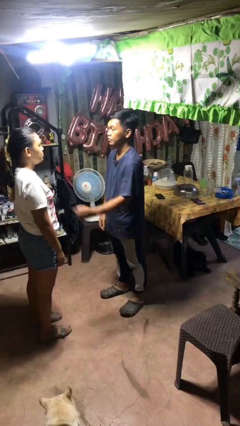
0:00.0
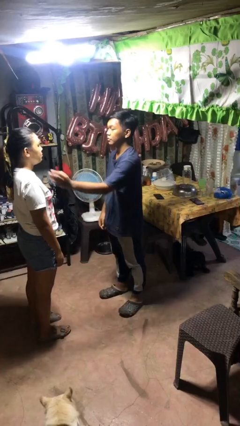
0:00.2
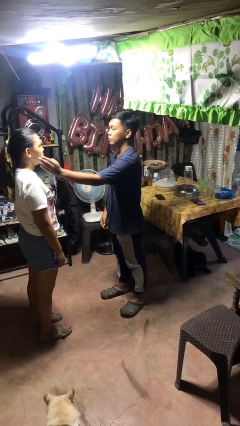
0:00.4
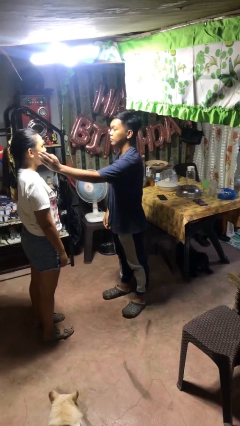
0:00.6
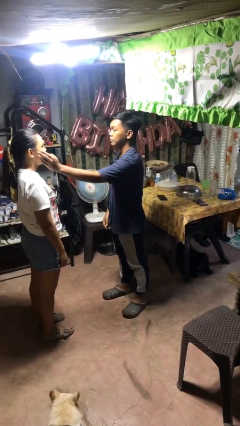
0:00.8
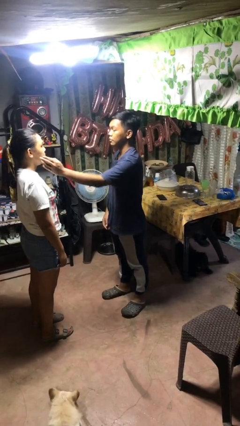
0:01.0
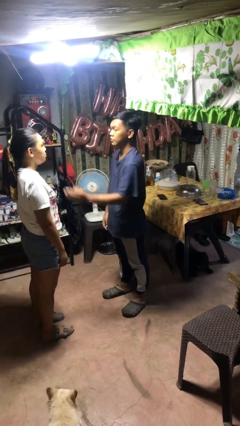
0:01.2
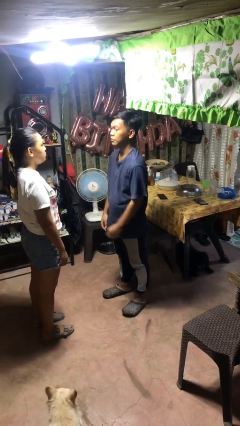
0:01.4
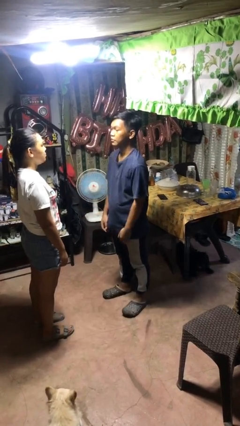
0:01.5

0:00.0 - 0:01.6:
person touches face of person

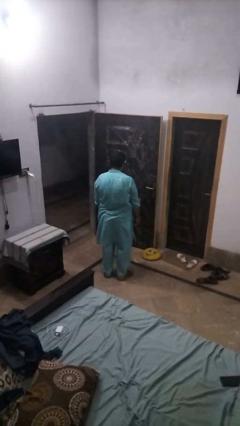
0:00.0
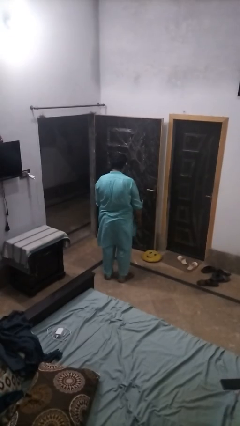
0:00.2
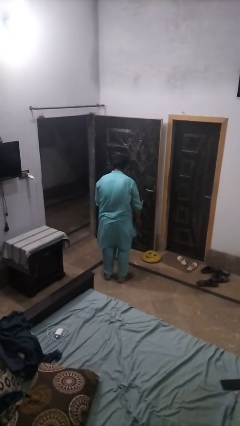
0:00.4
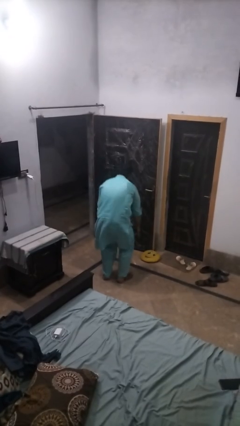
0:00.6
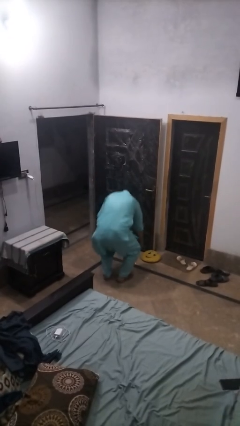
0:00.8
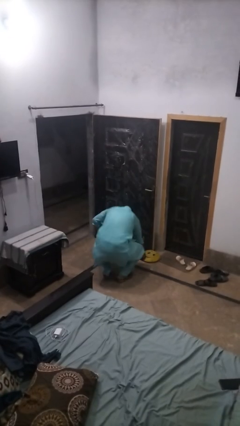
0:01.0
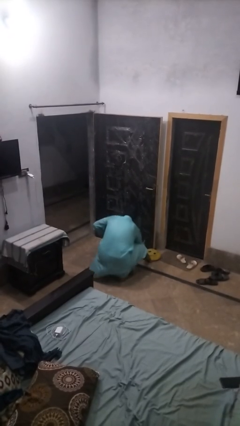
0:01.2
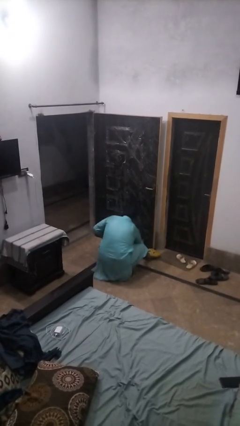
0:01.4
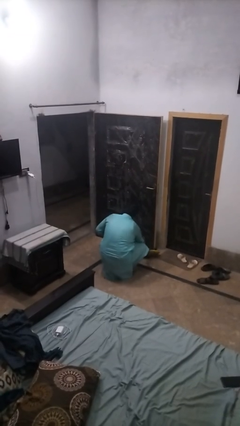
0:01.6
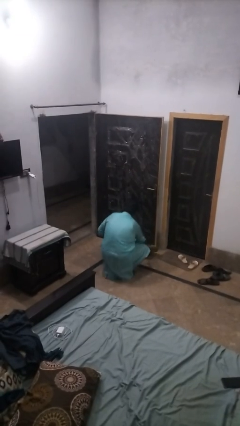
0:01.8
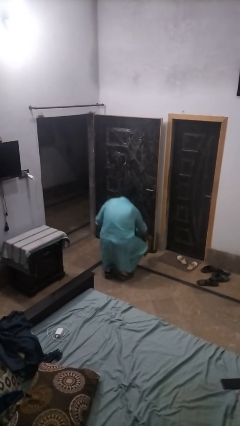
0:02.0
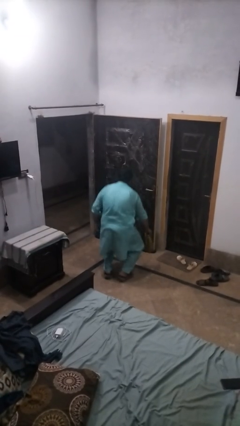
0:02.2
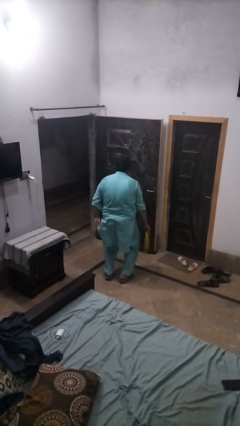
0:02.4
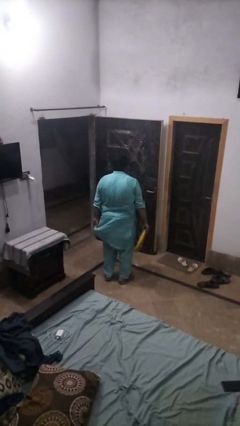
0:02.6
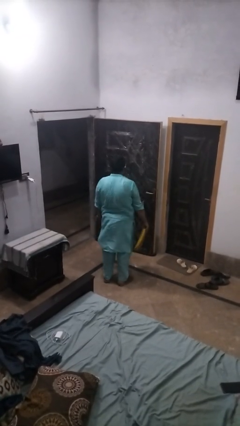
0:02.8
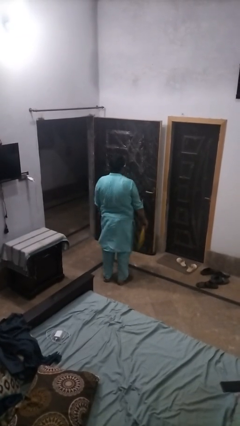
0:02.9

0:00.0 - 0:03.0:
person picks up object from floor

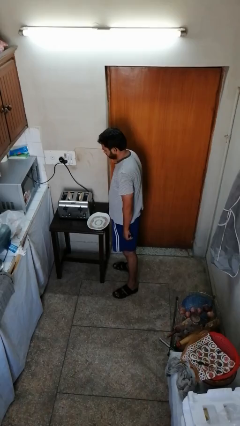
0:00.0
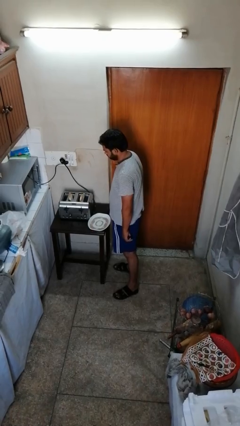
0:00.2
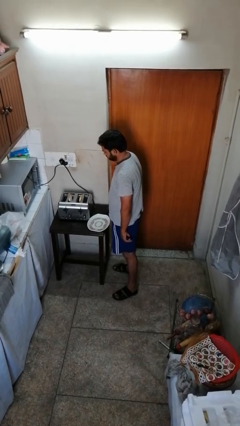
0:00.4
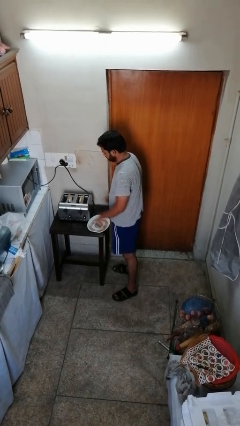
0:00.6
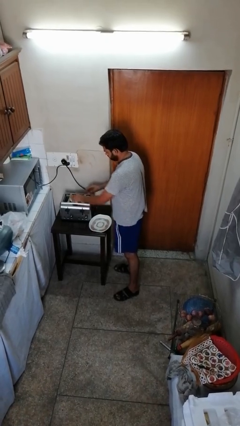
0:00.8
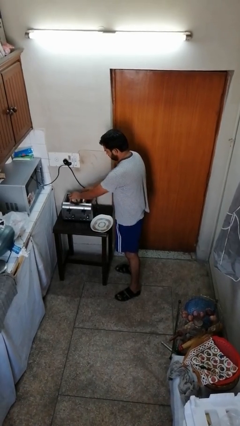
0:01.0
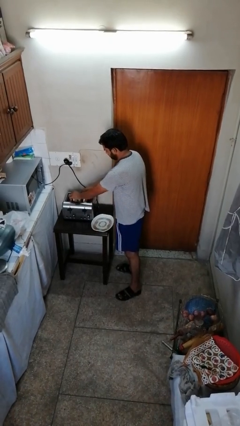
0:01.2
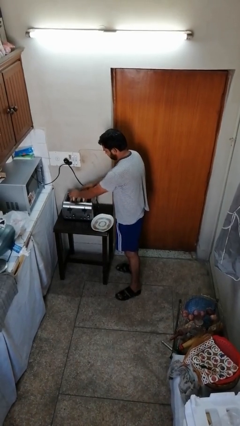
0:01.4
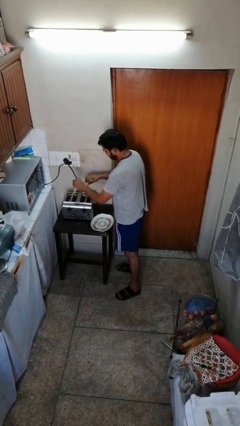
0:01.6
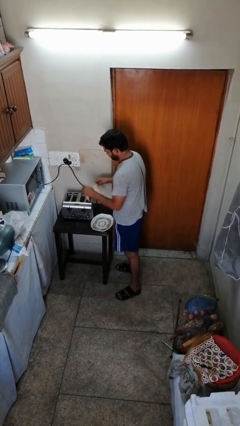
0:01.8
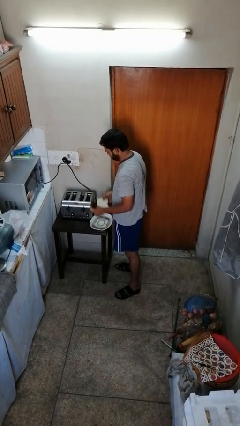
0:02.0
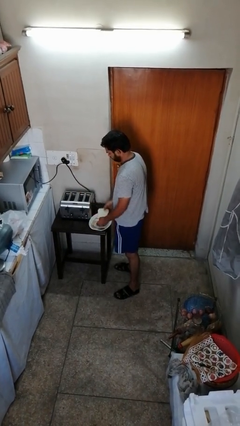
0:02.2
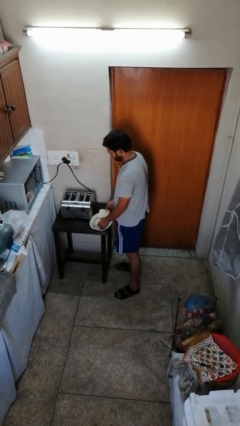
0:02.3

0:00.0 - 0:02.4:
person takes object from toaster

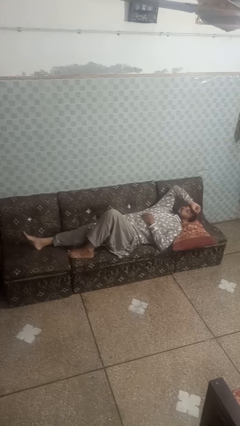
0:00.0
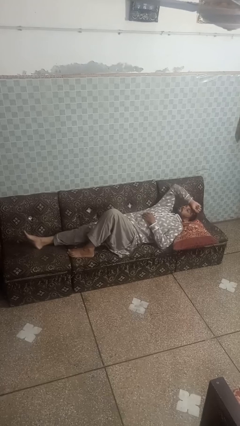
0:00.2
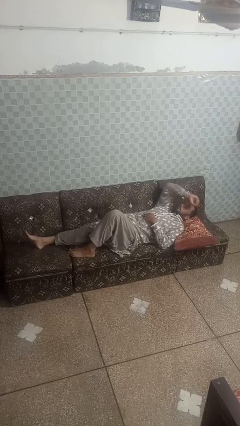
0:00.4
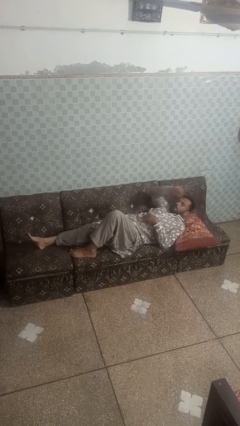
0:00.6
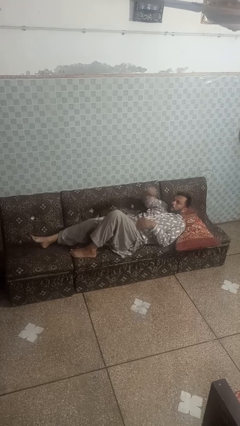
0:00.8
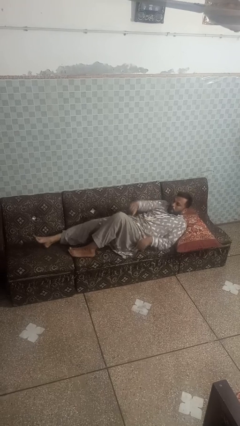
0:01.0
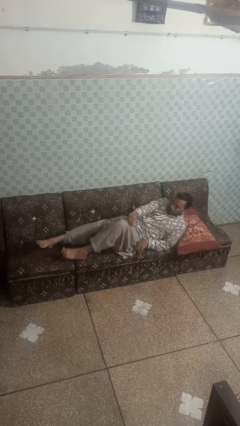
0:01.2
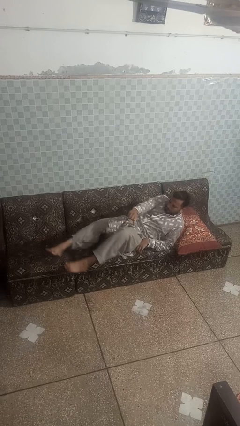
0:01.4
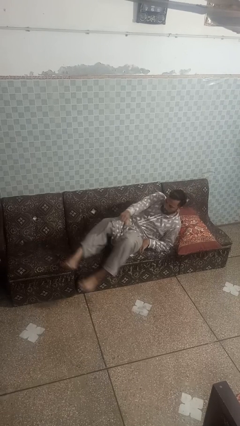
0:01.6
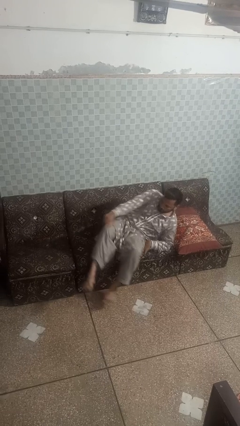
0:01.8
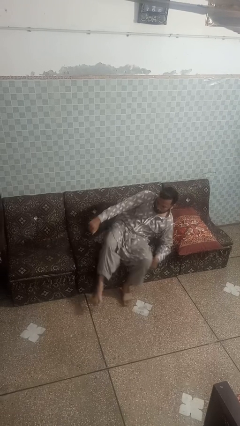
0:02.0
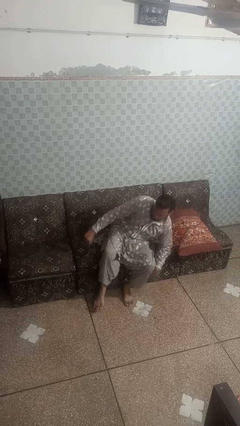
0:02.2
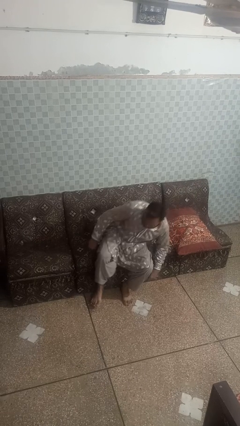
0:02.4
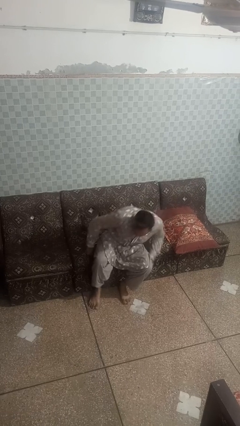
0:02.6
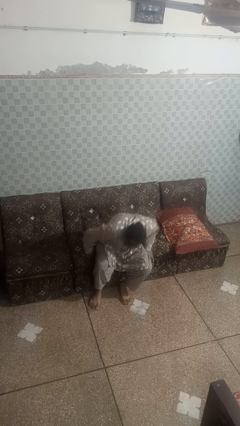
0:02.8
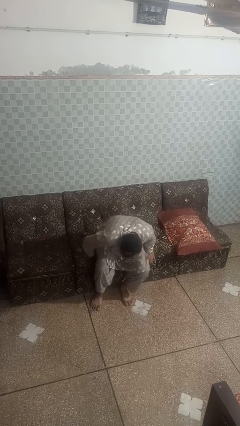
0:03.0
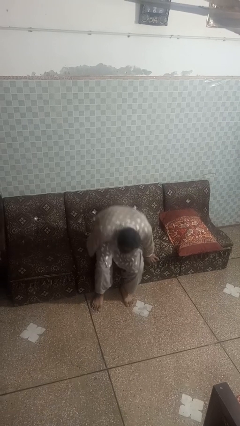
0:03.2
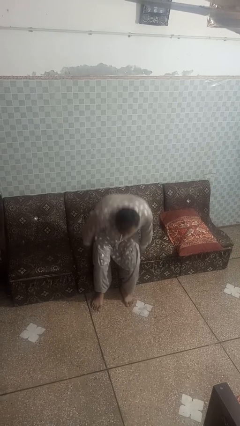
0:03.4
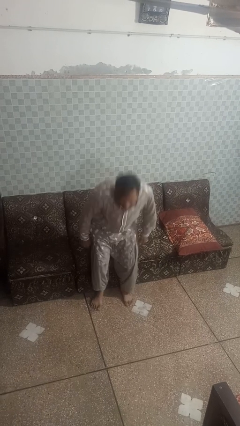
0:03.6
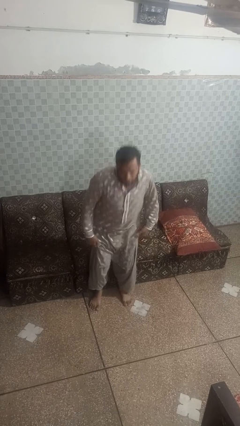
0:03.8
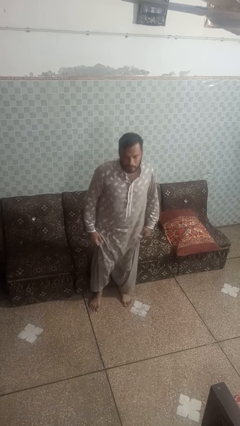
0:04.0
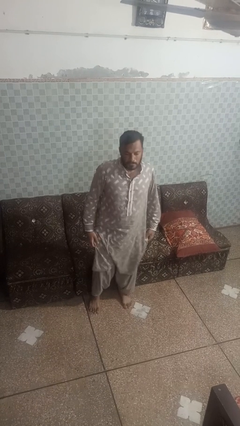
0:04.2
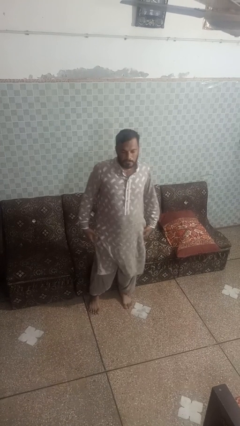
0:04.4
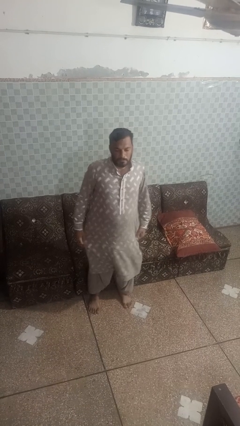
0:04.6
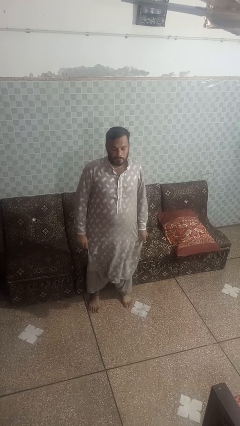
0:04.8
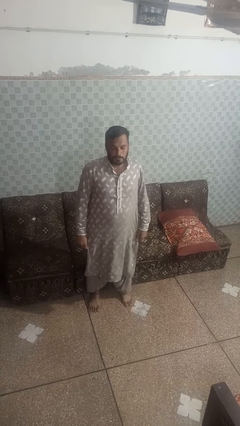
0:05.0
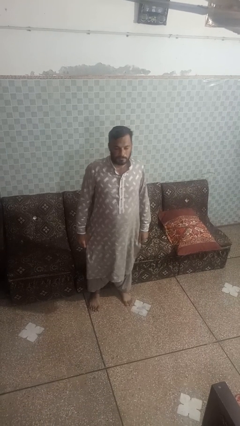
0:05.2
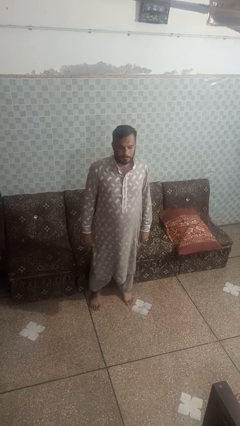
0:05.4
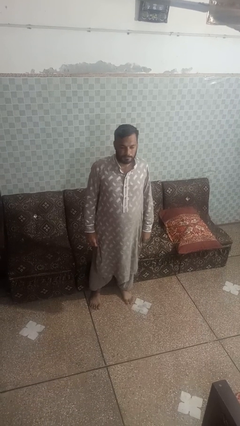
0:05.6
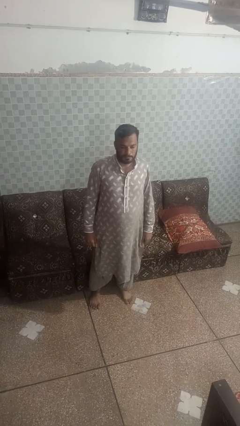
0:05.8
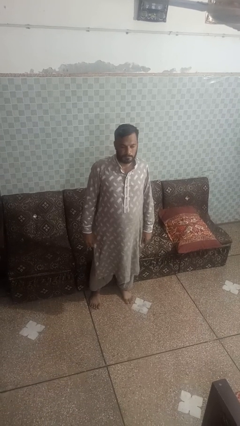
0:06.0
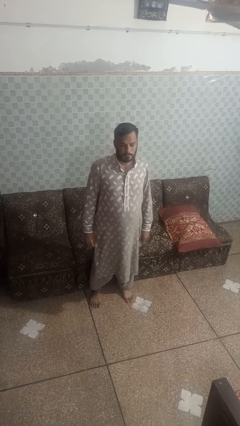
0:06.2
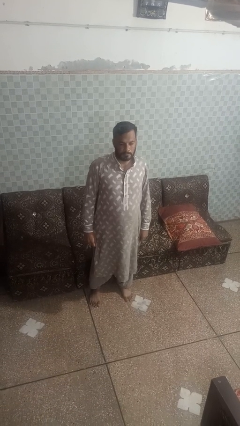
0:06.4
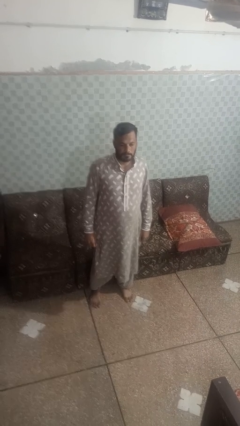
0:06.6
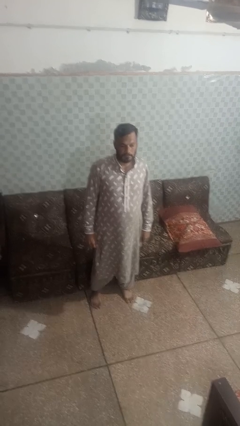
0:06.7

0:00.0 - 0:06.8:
person stands up

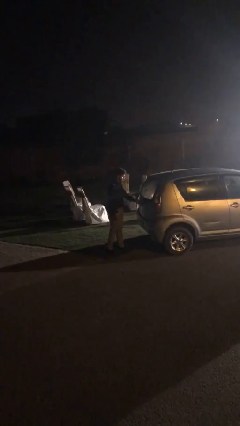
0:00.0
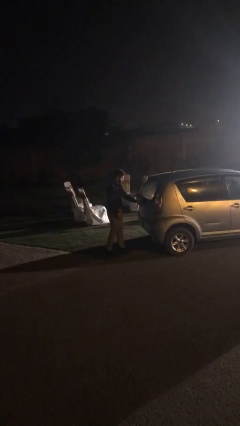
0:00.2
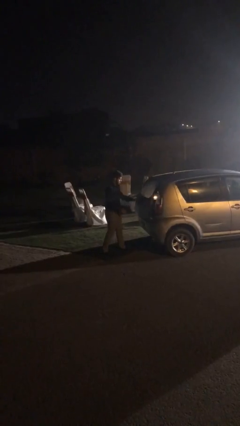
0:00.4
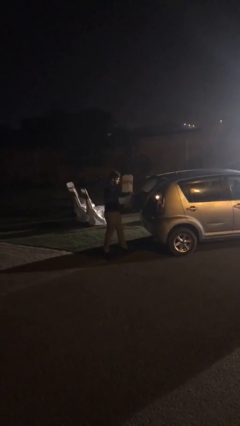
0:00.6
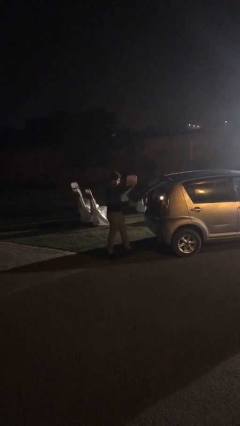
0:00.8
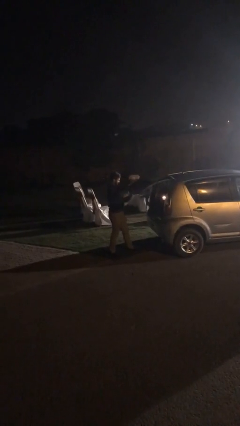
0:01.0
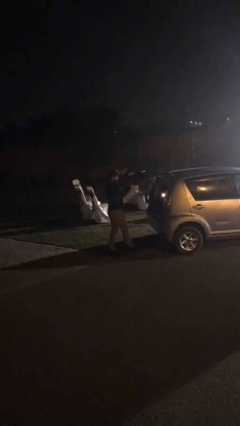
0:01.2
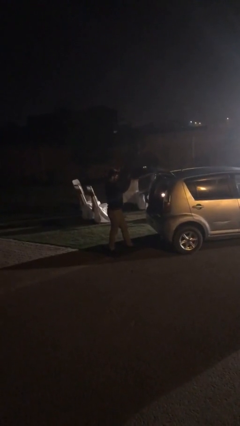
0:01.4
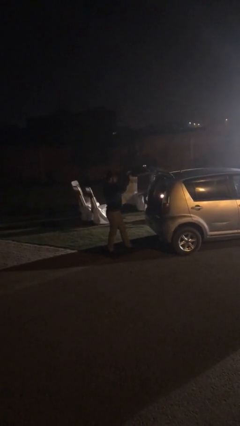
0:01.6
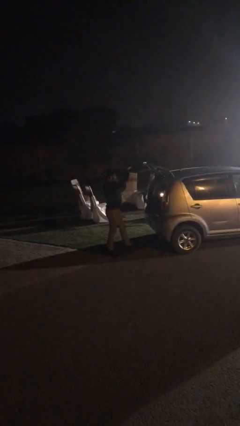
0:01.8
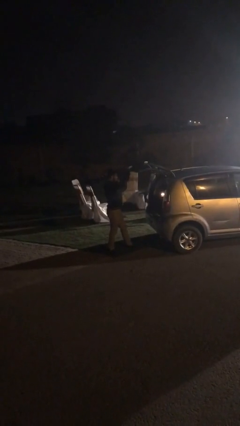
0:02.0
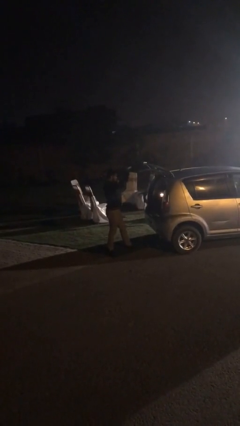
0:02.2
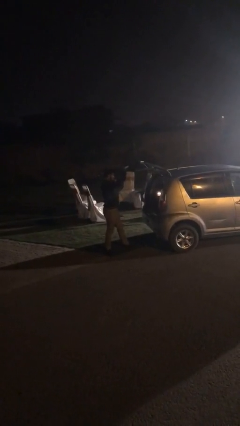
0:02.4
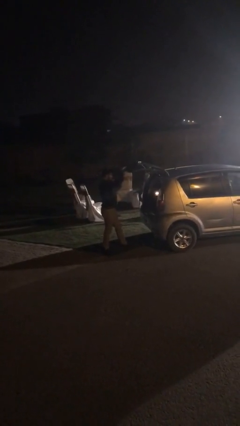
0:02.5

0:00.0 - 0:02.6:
person opens car trunk

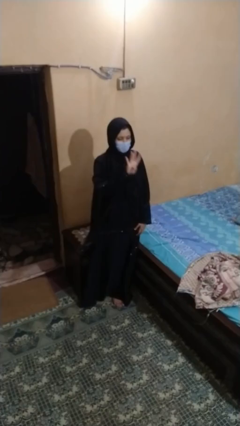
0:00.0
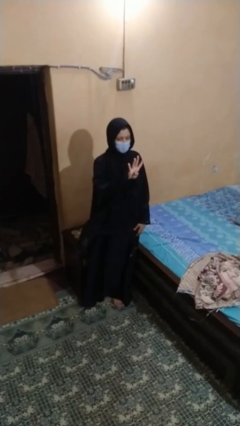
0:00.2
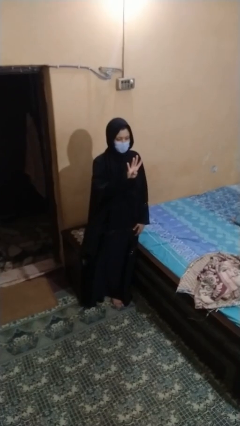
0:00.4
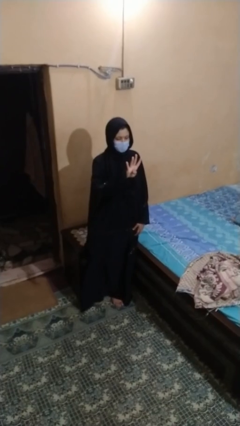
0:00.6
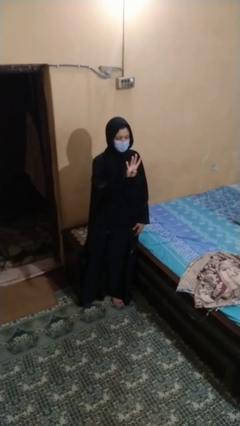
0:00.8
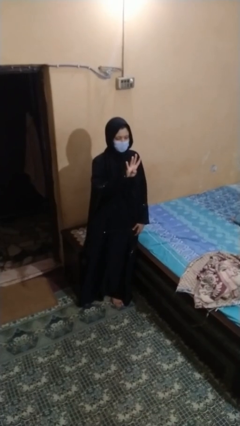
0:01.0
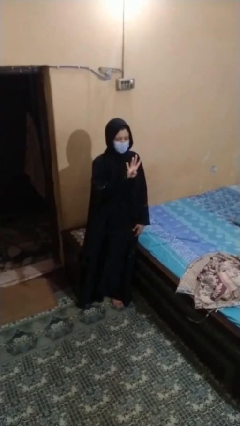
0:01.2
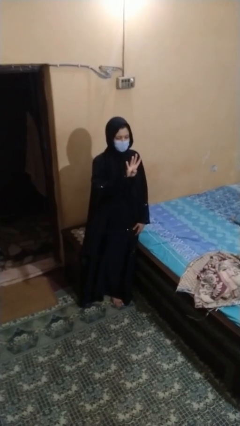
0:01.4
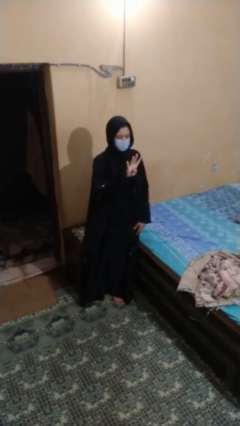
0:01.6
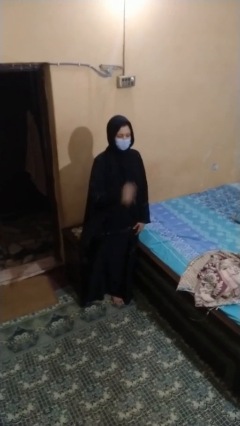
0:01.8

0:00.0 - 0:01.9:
person gestures number four
